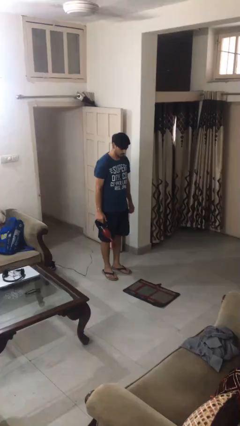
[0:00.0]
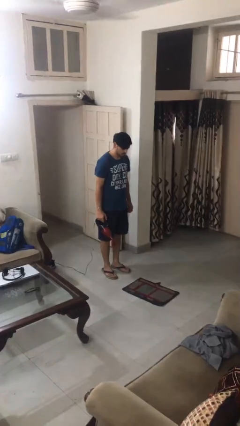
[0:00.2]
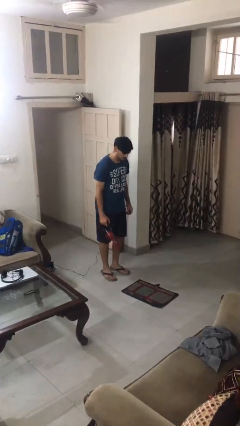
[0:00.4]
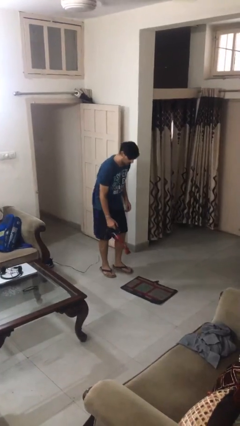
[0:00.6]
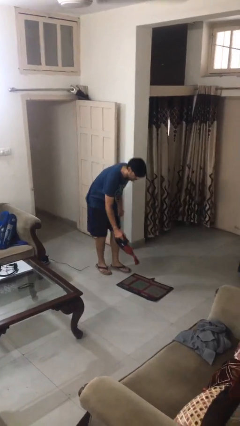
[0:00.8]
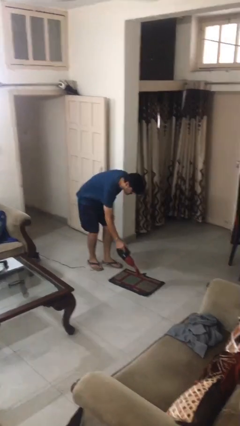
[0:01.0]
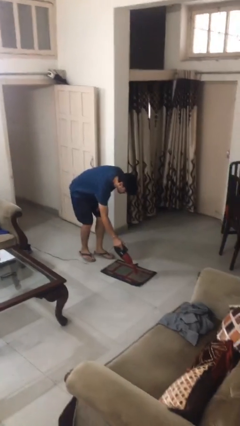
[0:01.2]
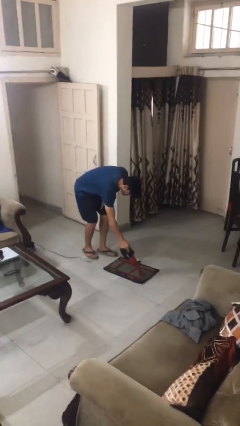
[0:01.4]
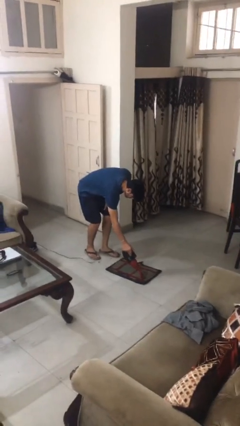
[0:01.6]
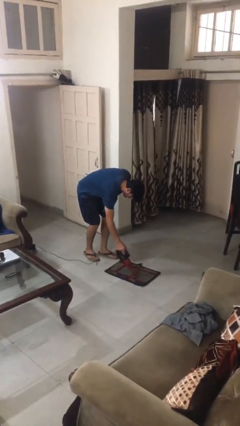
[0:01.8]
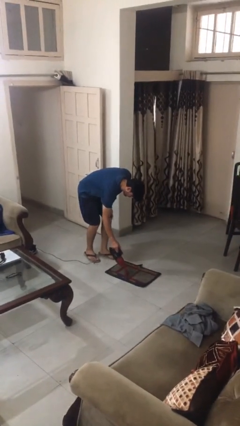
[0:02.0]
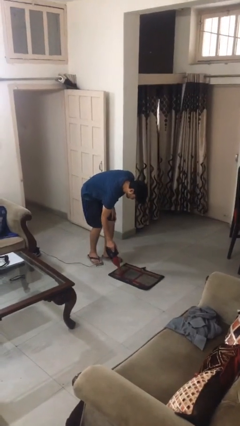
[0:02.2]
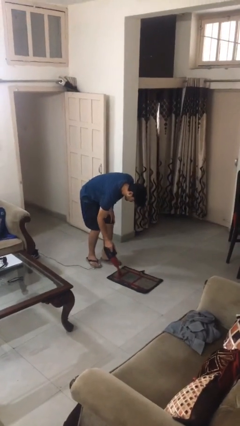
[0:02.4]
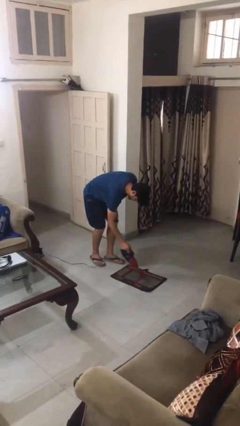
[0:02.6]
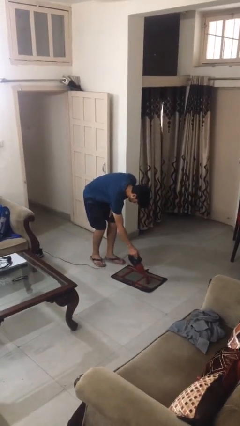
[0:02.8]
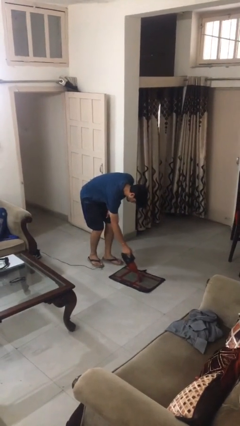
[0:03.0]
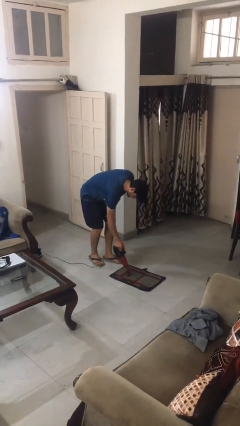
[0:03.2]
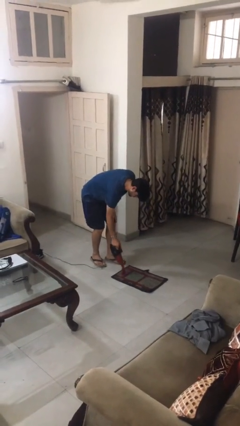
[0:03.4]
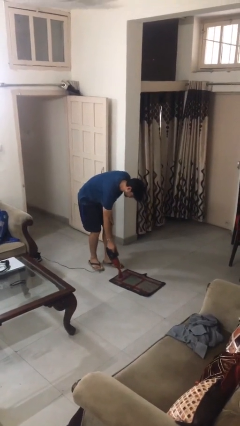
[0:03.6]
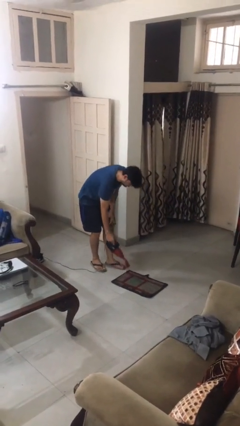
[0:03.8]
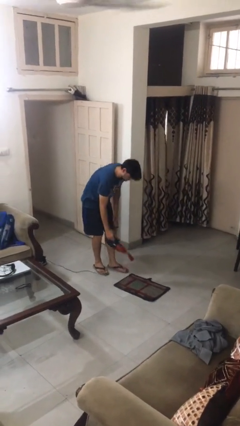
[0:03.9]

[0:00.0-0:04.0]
person vacuums carpet

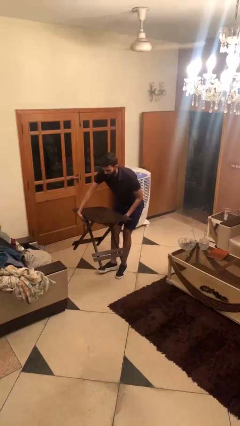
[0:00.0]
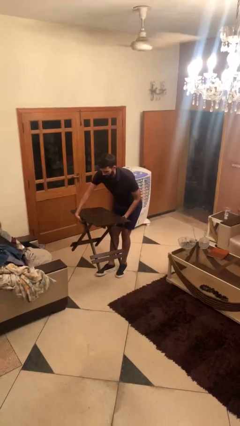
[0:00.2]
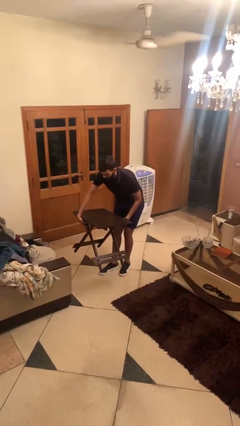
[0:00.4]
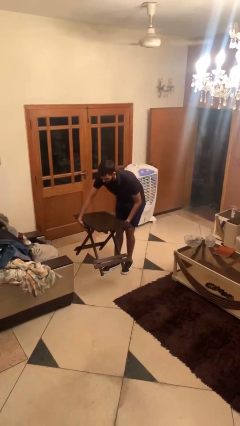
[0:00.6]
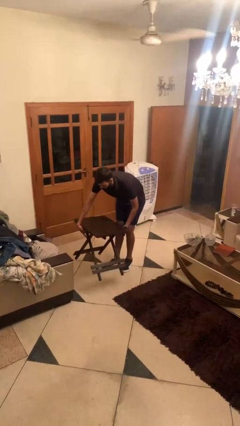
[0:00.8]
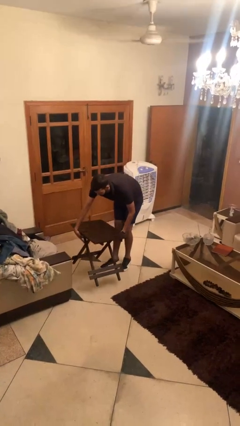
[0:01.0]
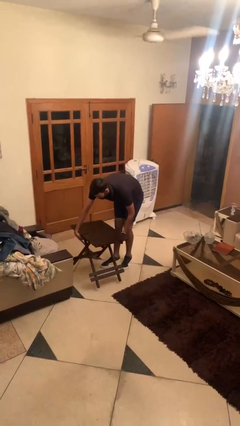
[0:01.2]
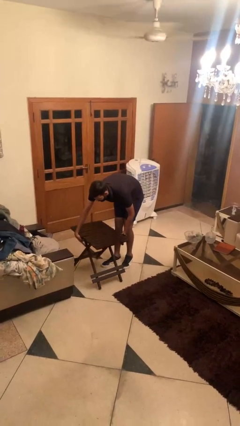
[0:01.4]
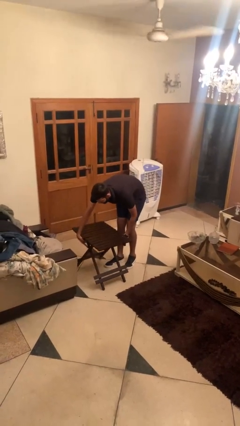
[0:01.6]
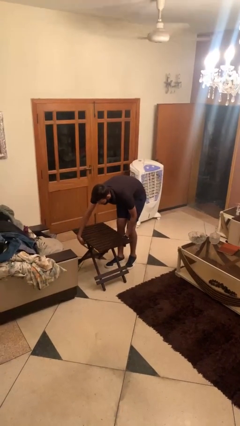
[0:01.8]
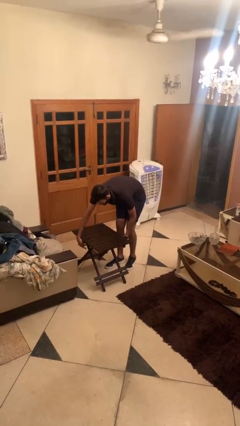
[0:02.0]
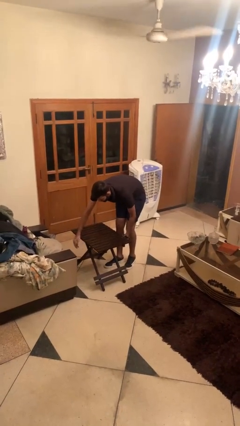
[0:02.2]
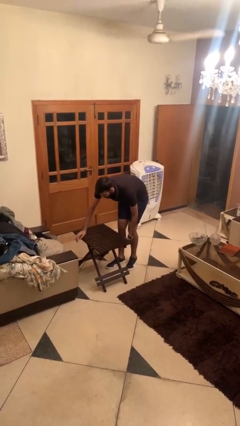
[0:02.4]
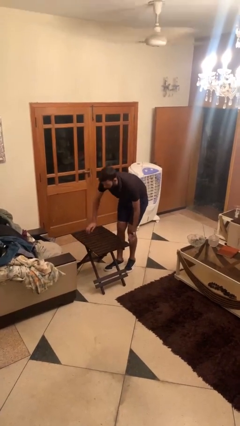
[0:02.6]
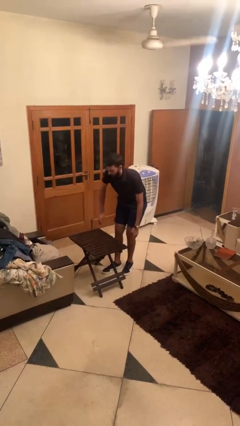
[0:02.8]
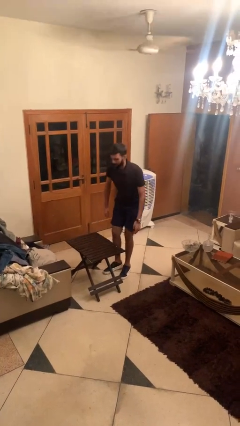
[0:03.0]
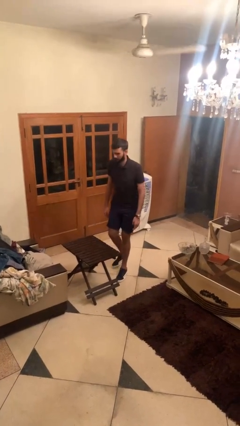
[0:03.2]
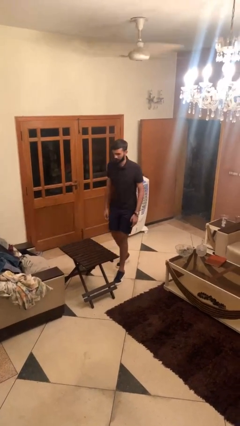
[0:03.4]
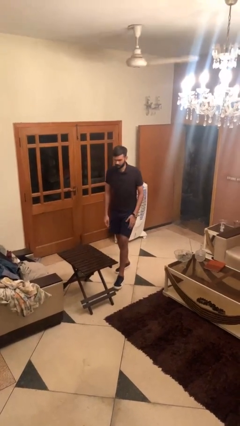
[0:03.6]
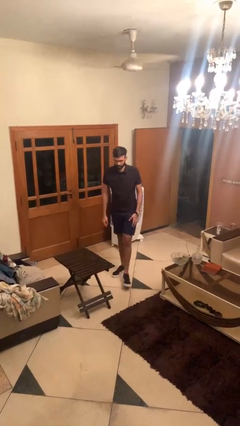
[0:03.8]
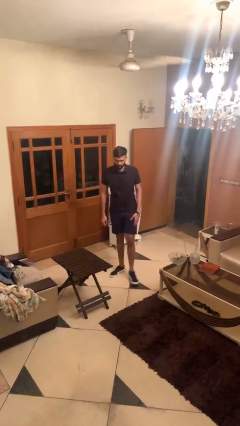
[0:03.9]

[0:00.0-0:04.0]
person puts down object on floor

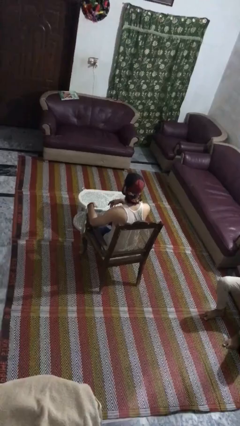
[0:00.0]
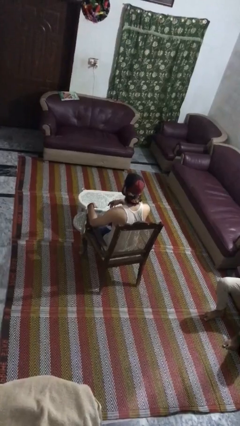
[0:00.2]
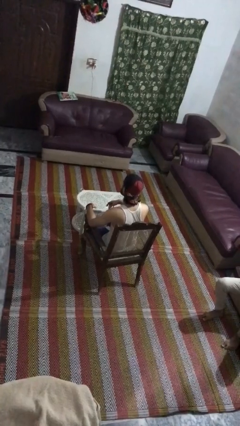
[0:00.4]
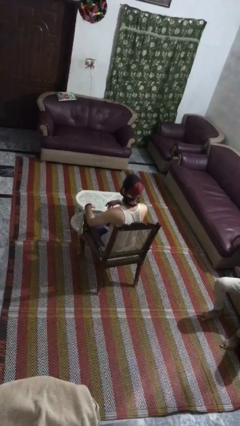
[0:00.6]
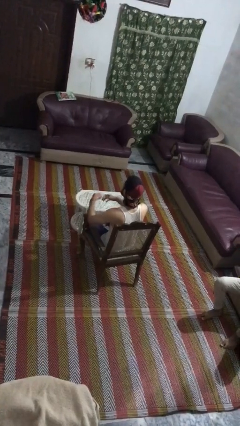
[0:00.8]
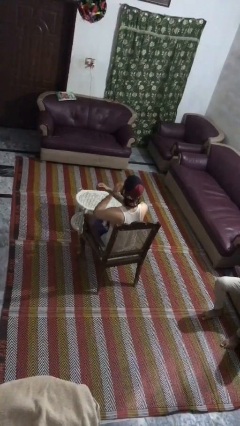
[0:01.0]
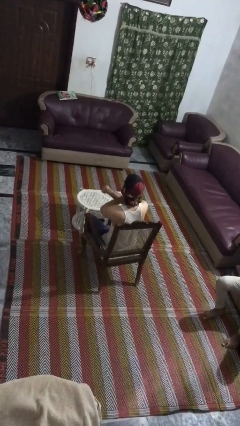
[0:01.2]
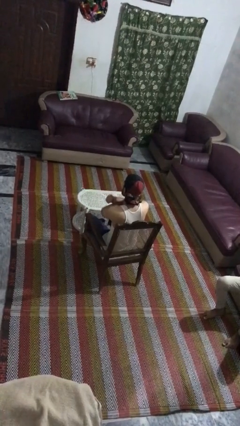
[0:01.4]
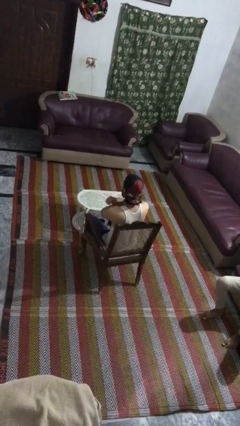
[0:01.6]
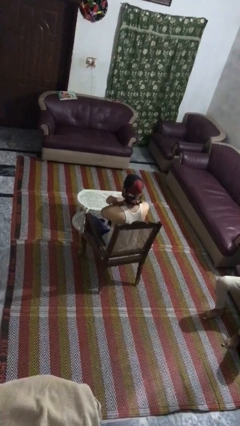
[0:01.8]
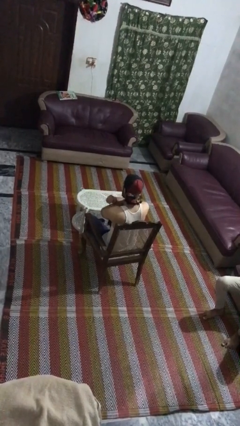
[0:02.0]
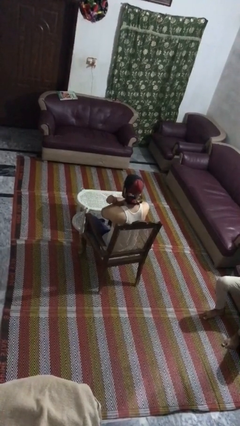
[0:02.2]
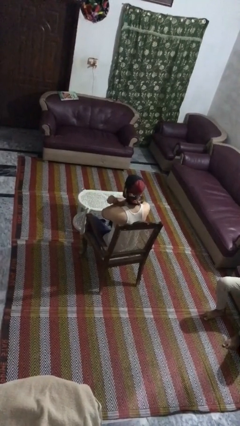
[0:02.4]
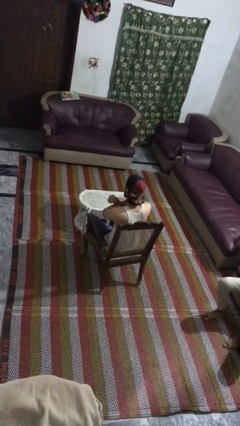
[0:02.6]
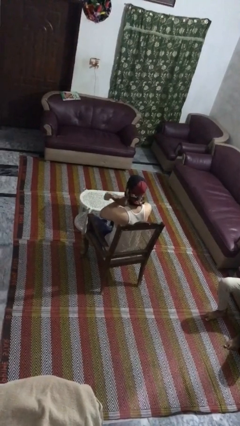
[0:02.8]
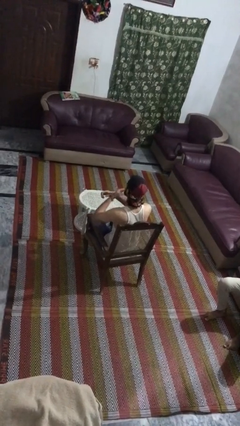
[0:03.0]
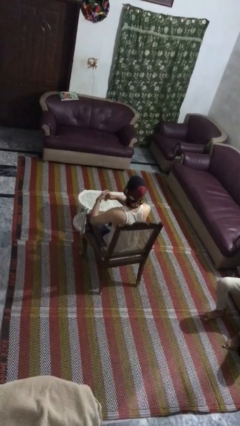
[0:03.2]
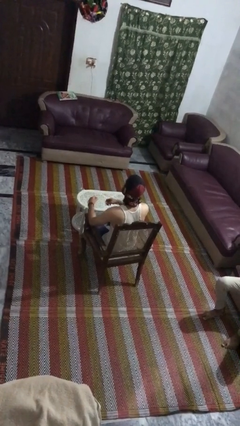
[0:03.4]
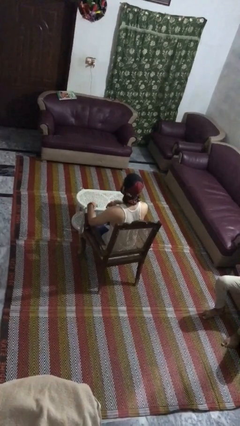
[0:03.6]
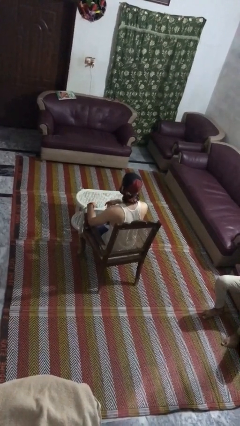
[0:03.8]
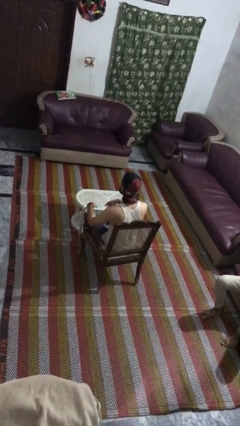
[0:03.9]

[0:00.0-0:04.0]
person gestures arms x

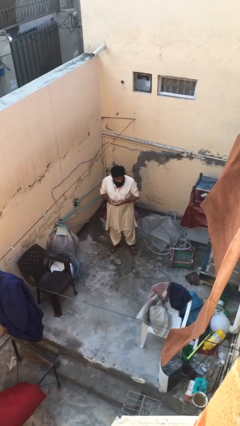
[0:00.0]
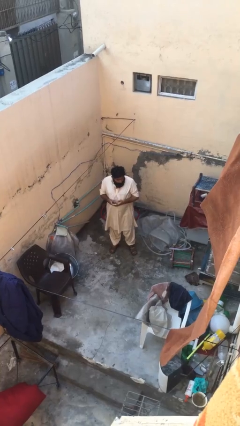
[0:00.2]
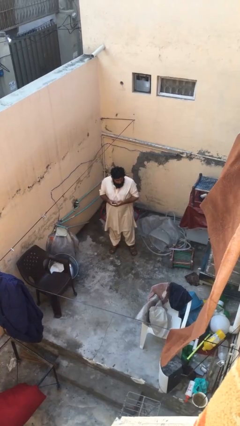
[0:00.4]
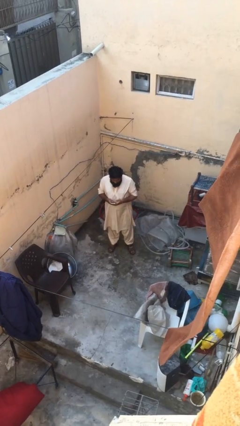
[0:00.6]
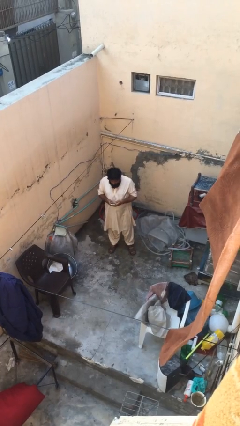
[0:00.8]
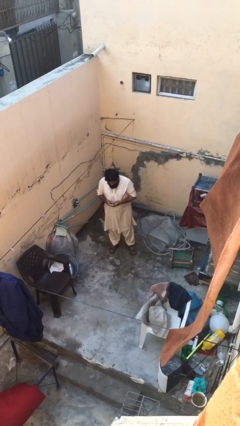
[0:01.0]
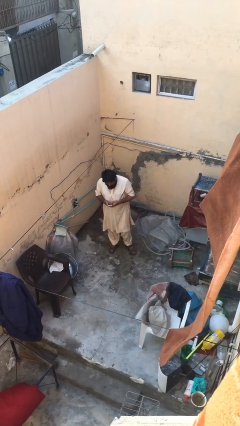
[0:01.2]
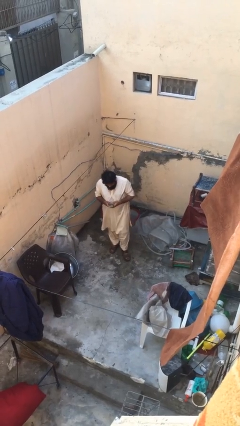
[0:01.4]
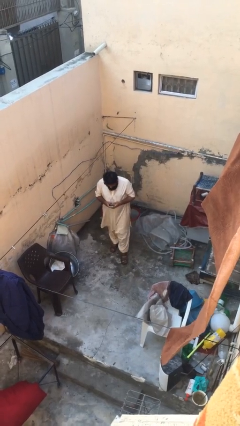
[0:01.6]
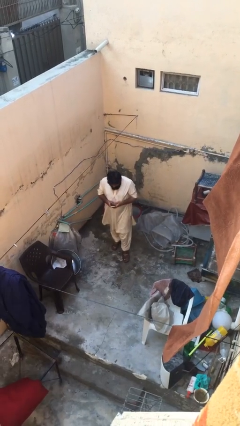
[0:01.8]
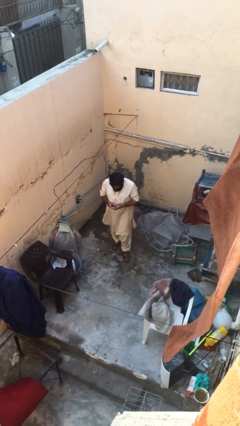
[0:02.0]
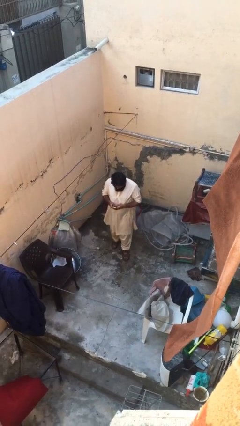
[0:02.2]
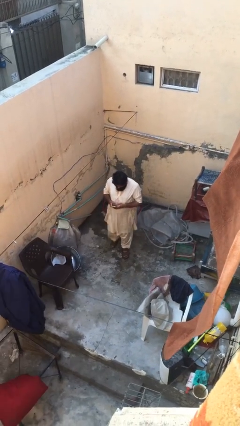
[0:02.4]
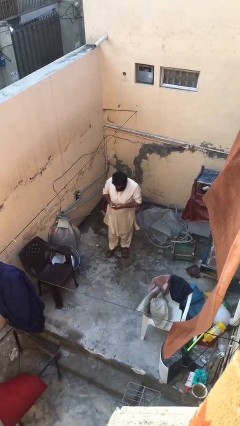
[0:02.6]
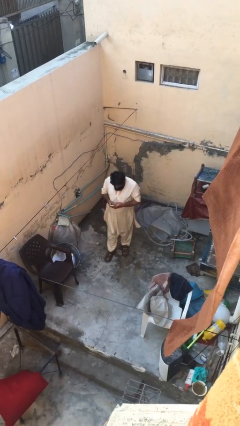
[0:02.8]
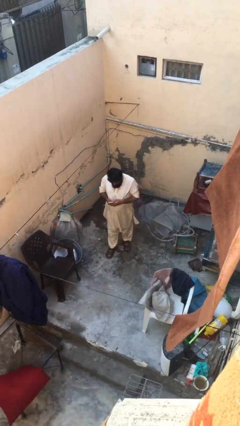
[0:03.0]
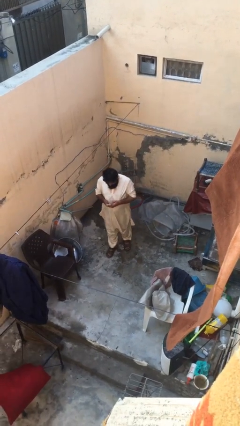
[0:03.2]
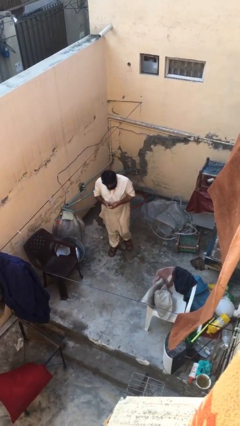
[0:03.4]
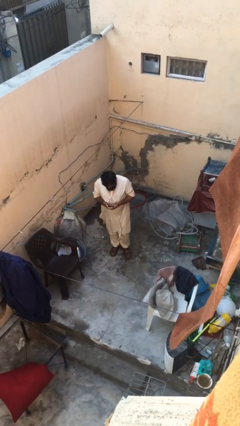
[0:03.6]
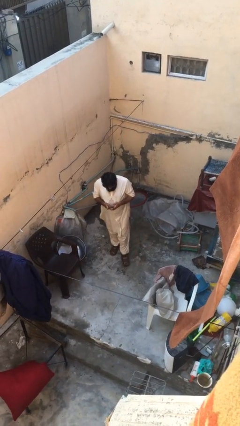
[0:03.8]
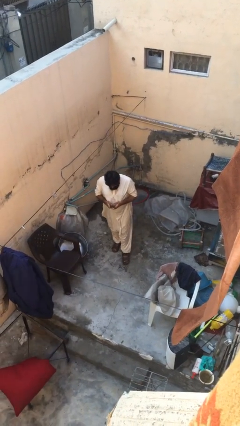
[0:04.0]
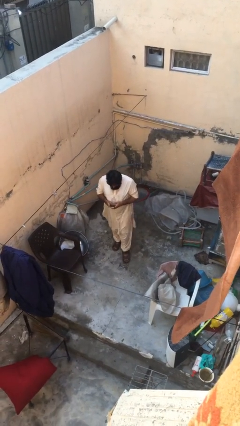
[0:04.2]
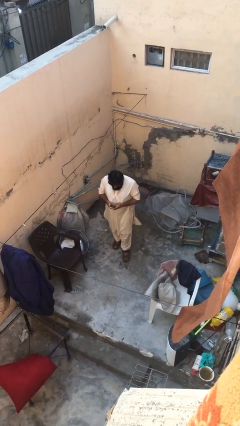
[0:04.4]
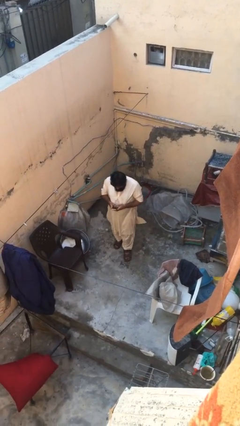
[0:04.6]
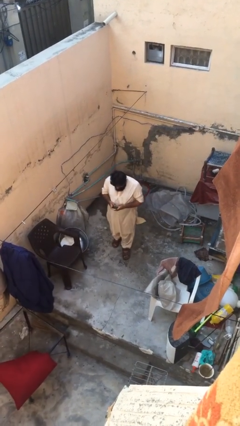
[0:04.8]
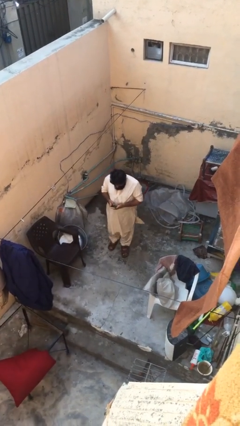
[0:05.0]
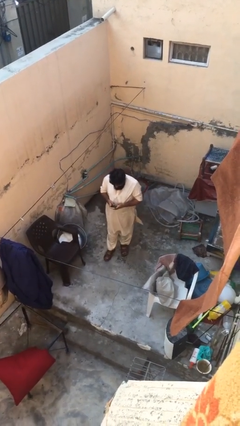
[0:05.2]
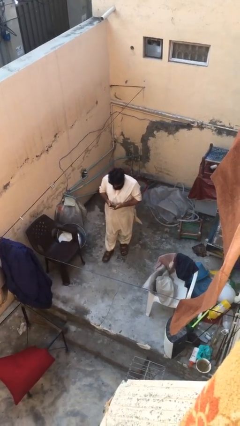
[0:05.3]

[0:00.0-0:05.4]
person texts on phone

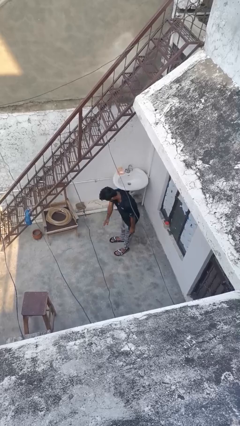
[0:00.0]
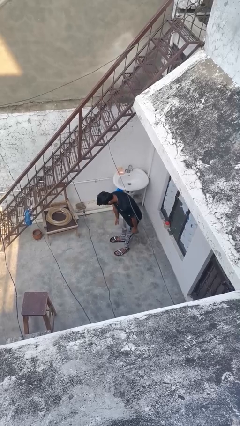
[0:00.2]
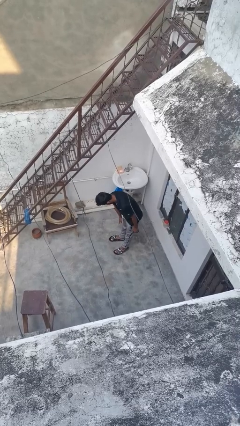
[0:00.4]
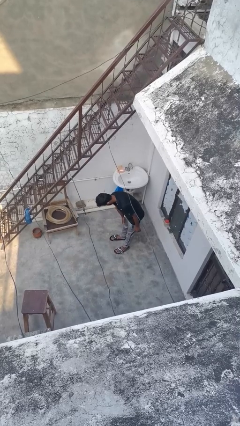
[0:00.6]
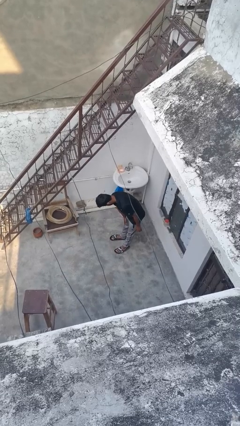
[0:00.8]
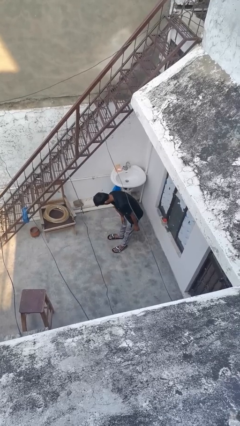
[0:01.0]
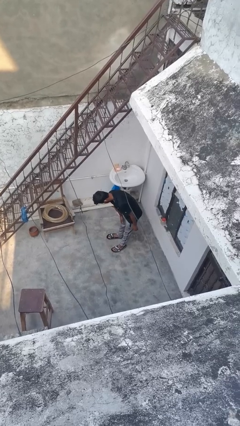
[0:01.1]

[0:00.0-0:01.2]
person gestures swipe down
